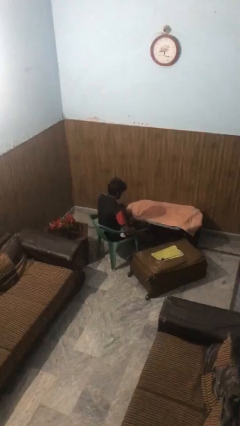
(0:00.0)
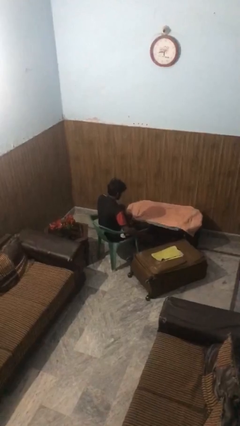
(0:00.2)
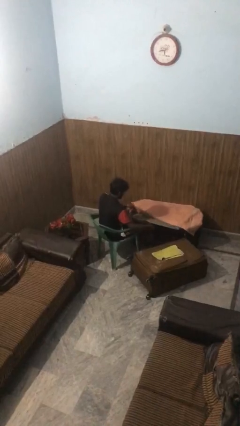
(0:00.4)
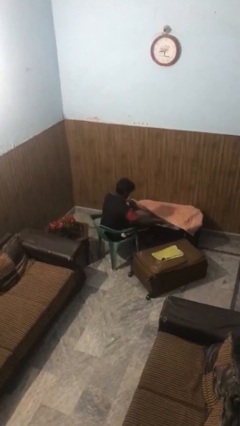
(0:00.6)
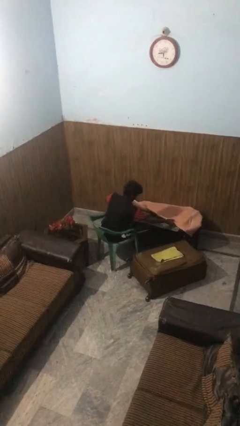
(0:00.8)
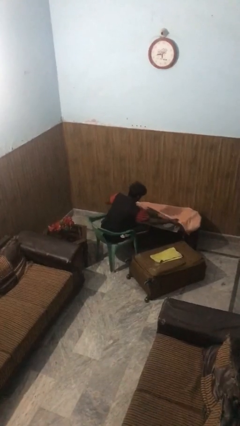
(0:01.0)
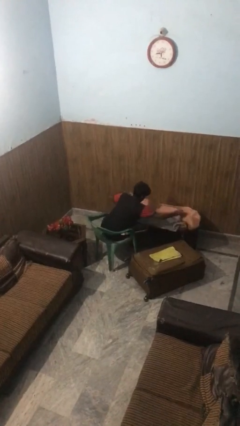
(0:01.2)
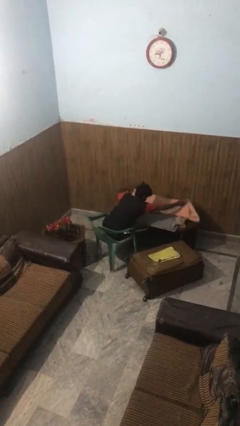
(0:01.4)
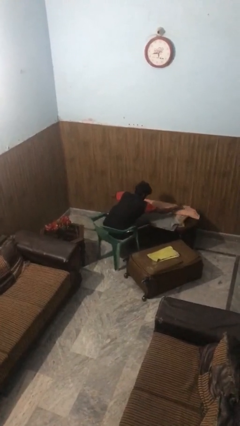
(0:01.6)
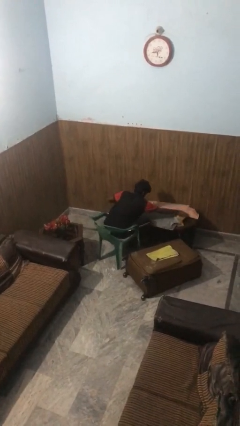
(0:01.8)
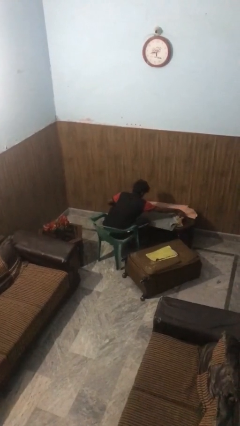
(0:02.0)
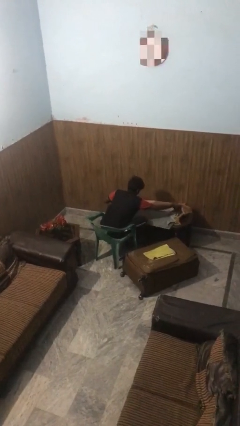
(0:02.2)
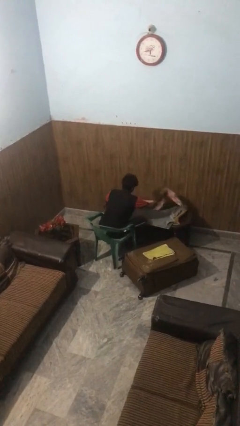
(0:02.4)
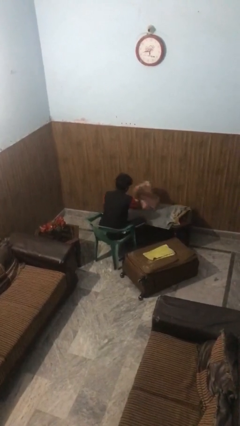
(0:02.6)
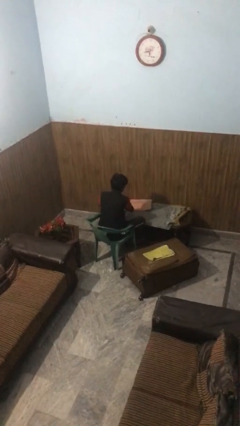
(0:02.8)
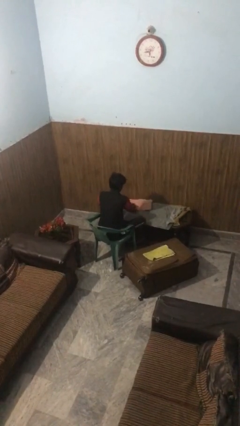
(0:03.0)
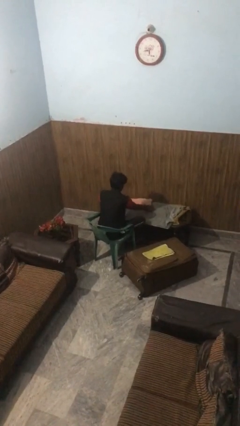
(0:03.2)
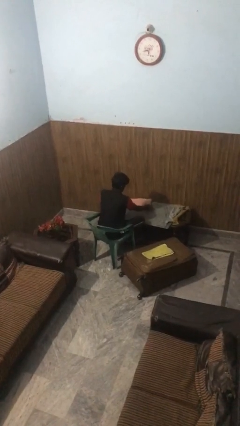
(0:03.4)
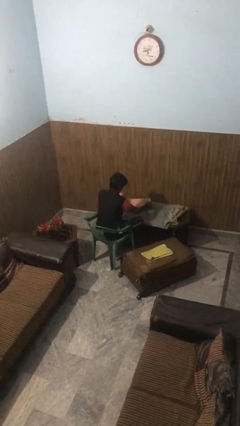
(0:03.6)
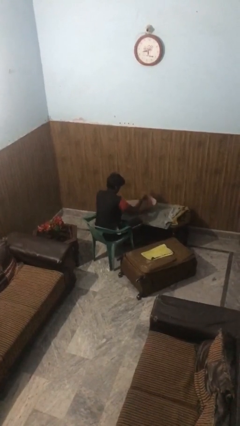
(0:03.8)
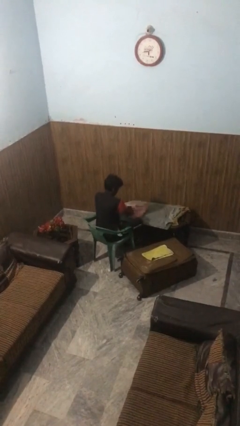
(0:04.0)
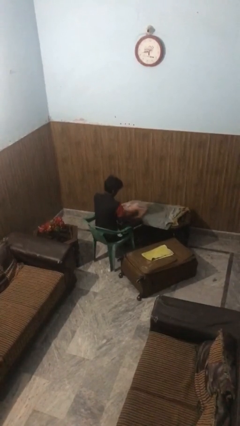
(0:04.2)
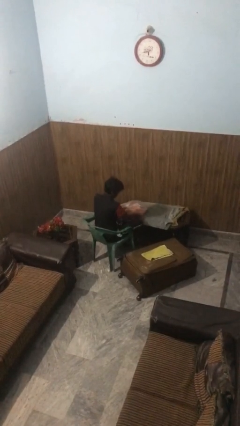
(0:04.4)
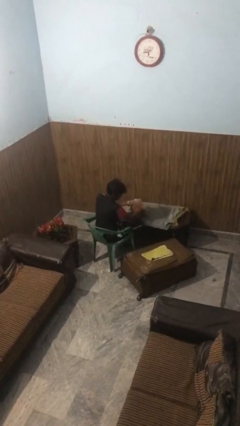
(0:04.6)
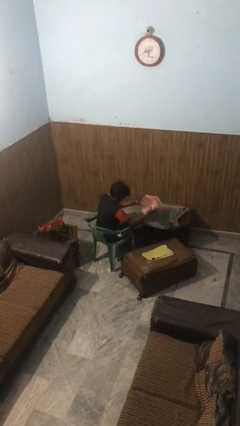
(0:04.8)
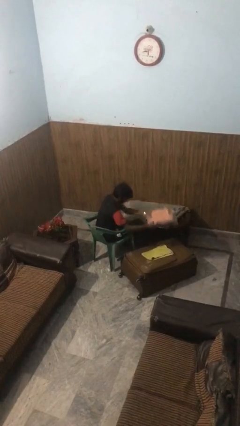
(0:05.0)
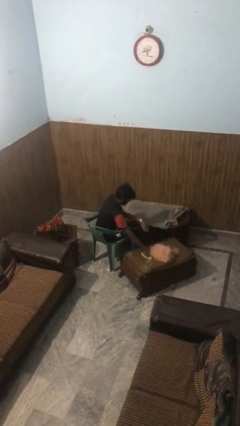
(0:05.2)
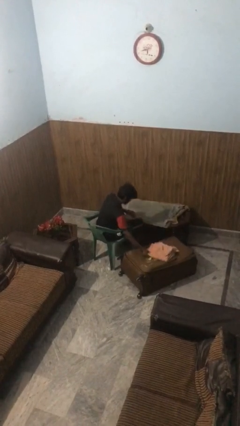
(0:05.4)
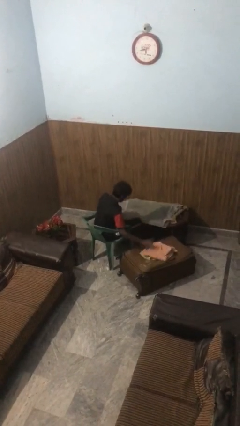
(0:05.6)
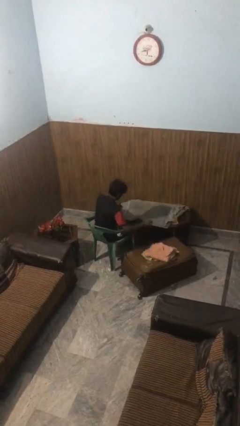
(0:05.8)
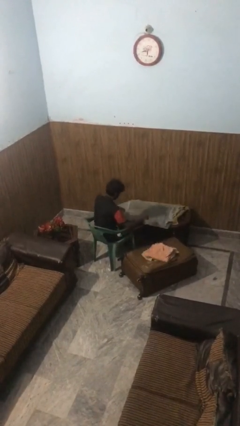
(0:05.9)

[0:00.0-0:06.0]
person folds towel

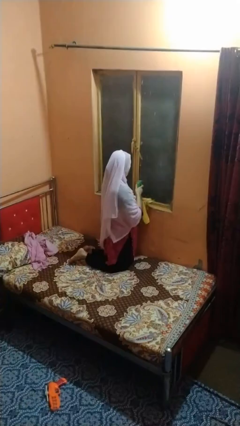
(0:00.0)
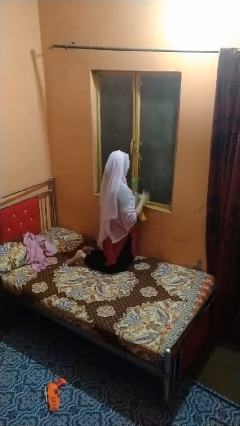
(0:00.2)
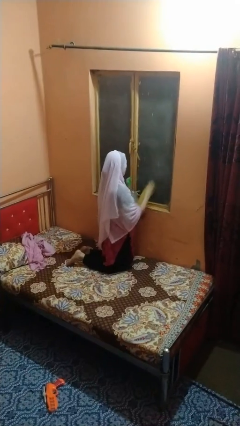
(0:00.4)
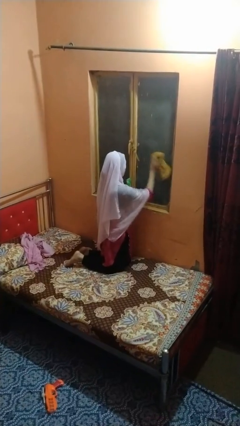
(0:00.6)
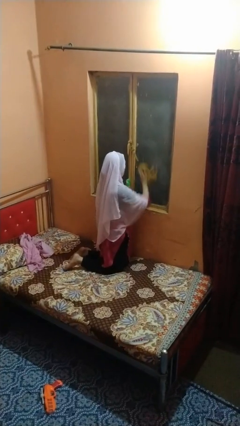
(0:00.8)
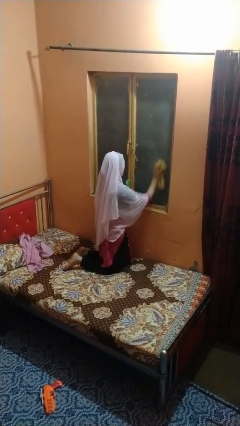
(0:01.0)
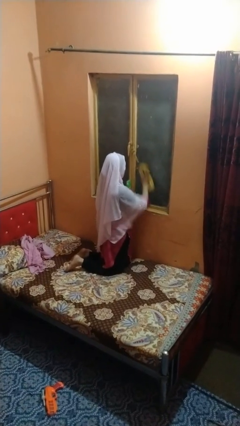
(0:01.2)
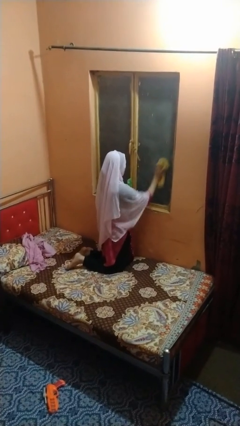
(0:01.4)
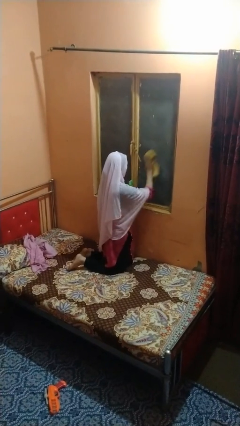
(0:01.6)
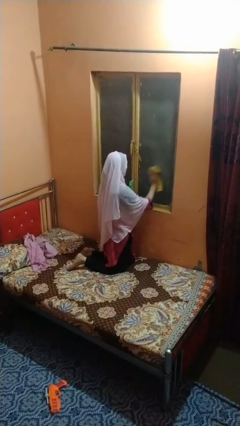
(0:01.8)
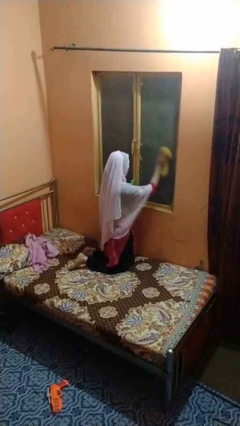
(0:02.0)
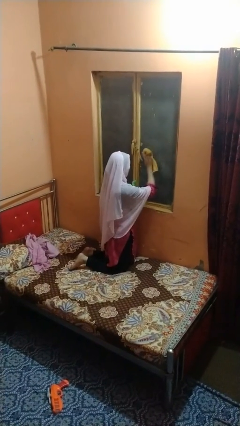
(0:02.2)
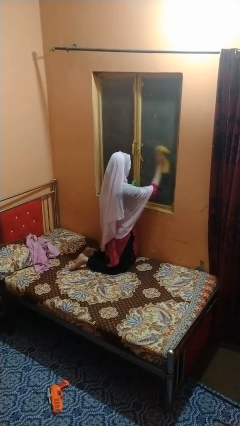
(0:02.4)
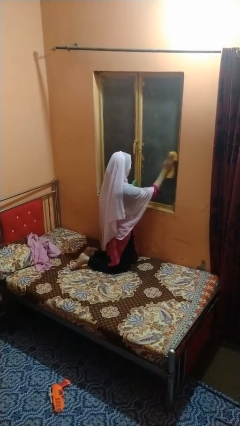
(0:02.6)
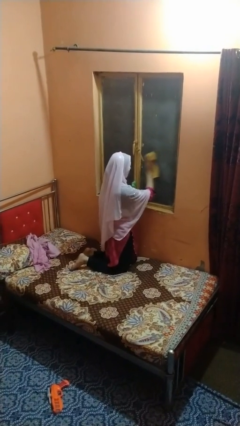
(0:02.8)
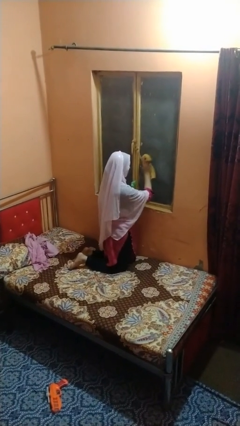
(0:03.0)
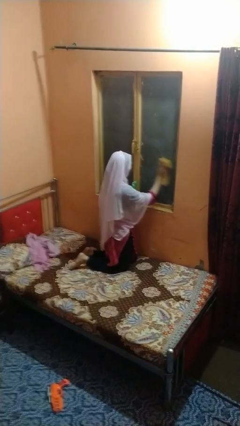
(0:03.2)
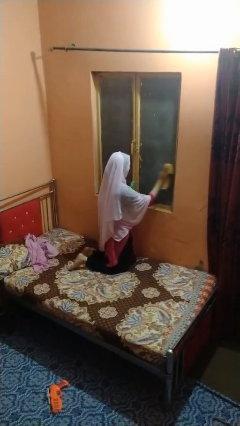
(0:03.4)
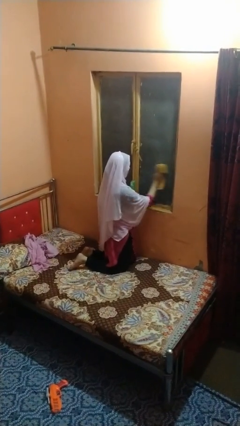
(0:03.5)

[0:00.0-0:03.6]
person washes window

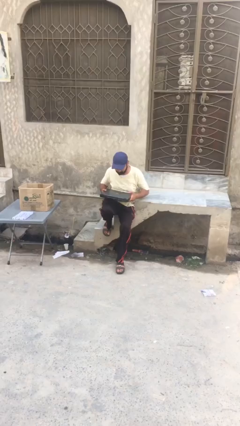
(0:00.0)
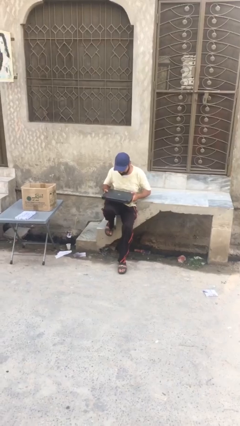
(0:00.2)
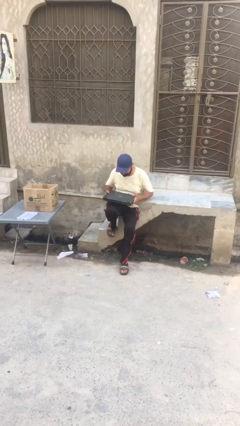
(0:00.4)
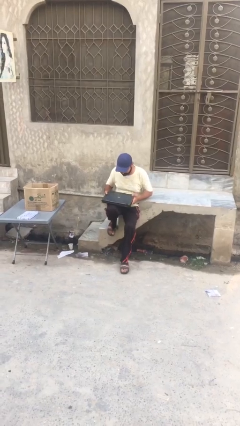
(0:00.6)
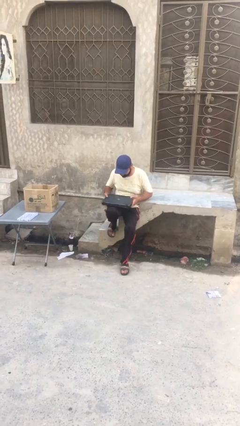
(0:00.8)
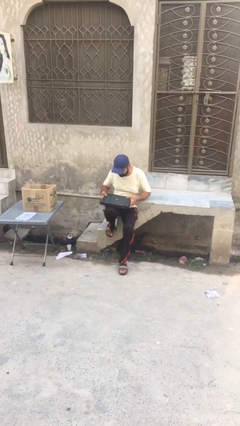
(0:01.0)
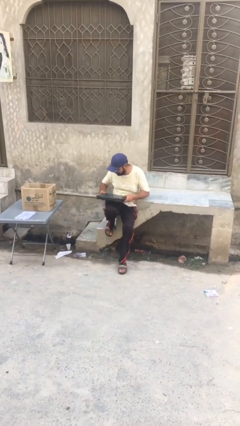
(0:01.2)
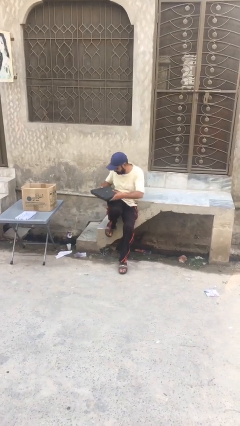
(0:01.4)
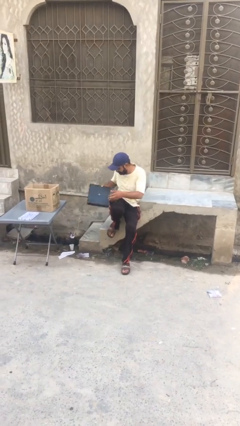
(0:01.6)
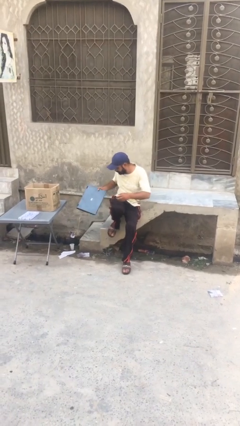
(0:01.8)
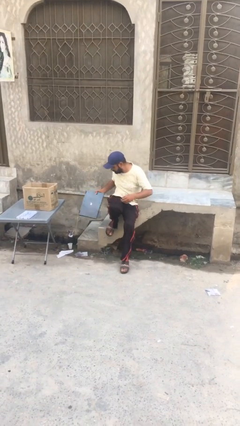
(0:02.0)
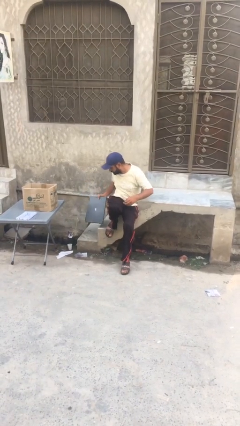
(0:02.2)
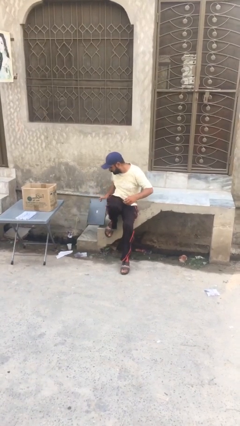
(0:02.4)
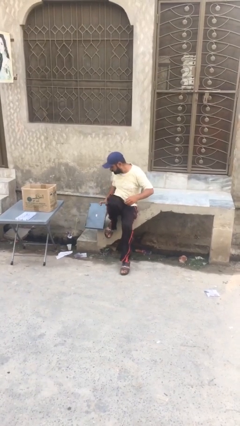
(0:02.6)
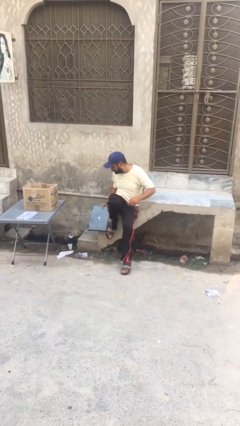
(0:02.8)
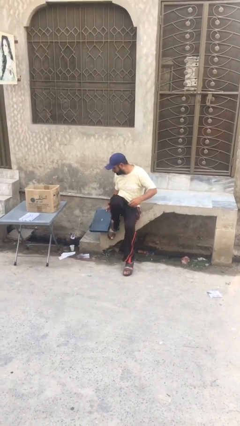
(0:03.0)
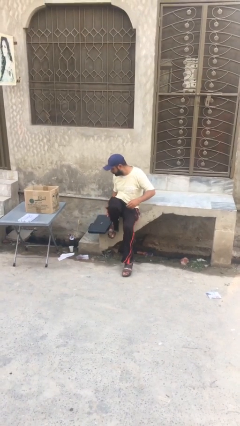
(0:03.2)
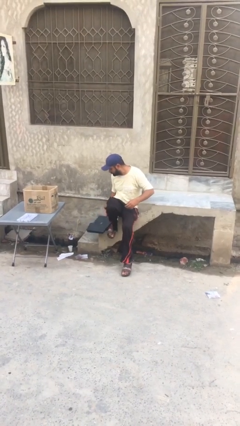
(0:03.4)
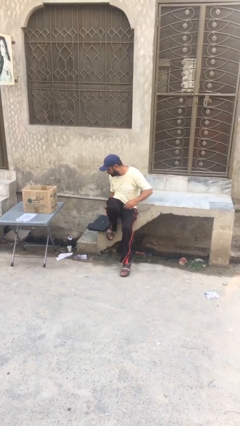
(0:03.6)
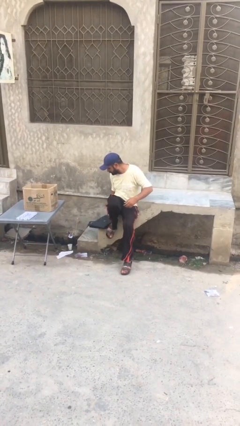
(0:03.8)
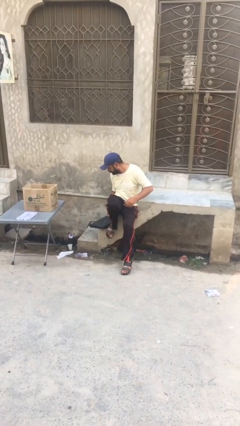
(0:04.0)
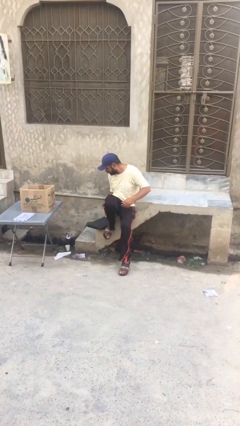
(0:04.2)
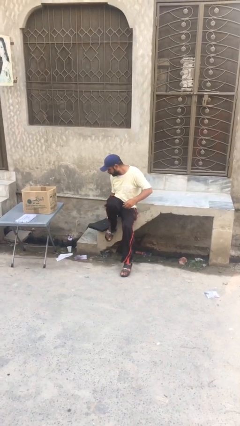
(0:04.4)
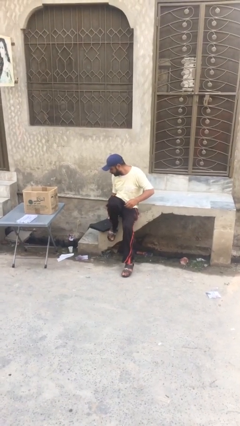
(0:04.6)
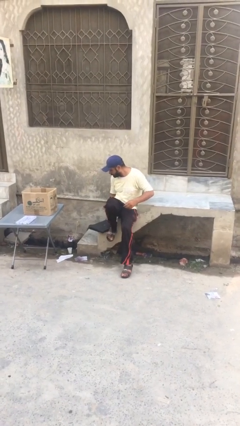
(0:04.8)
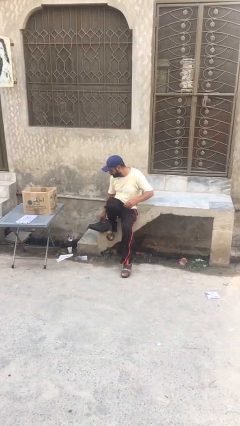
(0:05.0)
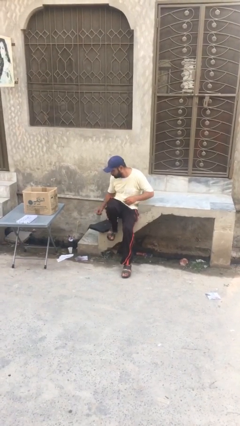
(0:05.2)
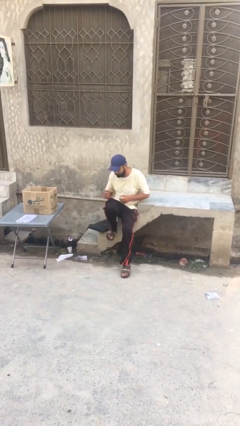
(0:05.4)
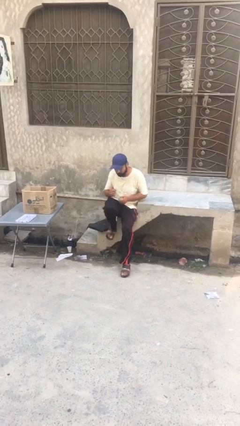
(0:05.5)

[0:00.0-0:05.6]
person puts down object on floor

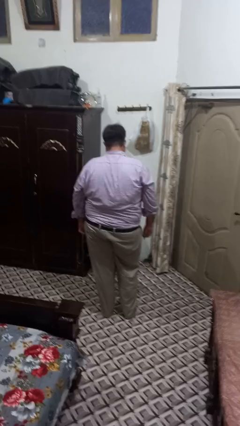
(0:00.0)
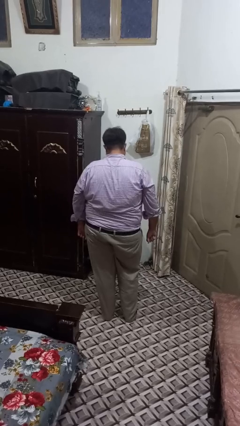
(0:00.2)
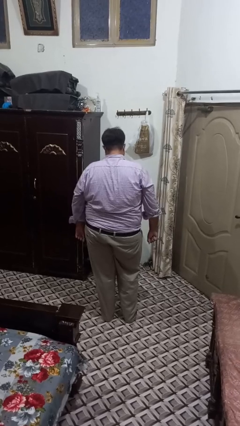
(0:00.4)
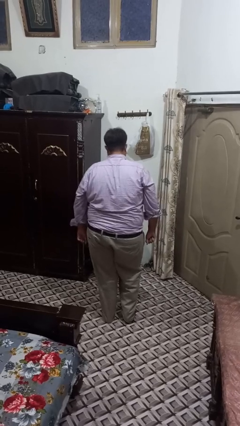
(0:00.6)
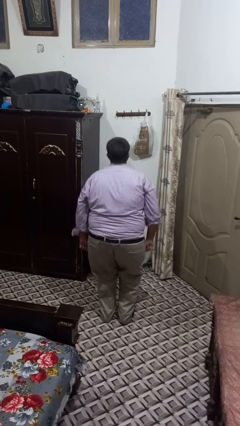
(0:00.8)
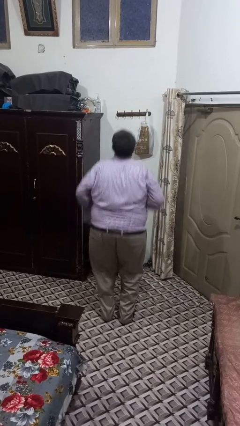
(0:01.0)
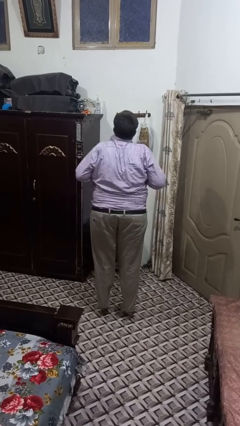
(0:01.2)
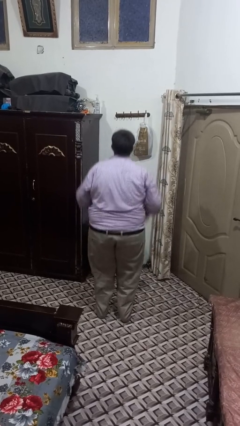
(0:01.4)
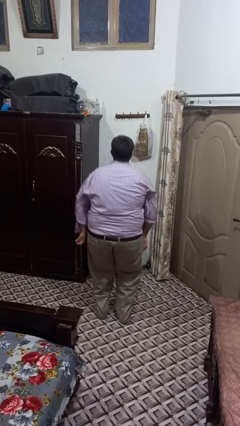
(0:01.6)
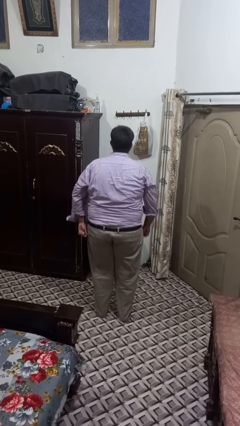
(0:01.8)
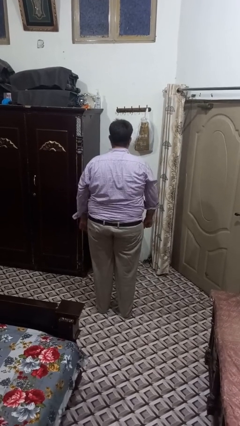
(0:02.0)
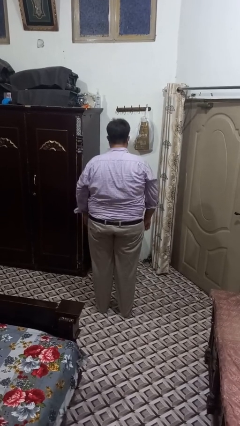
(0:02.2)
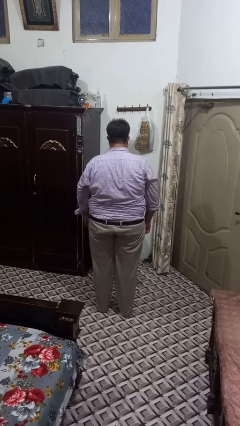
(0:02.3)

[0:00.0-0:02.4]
person jumps

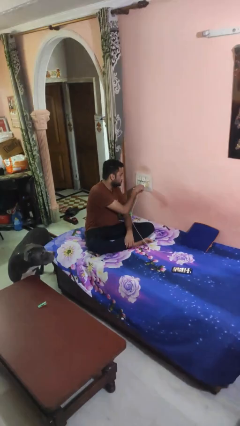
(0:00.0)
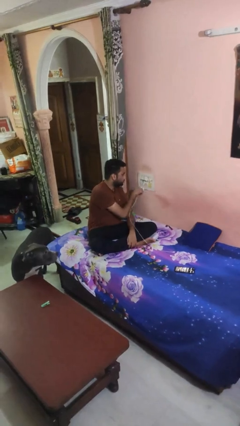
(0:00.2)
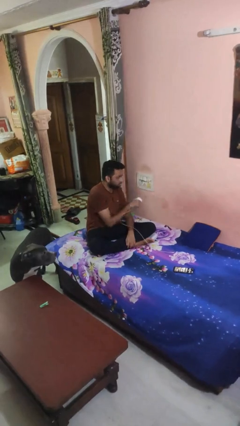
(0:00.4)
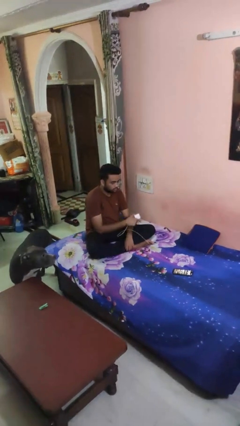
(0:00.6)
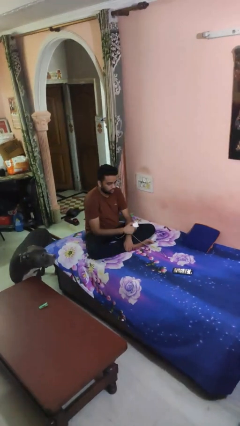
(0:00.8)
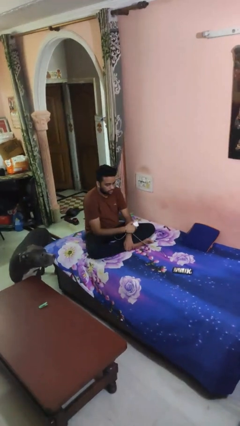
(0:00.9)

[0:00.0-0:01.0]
person unplugs from electrical socket
